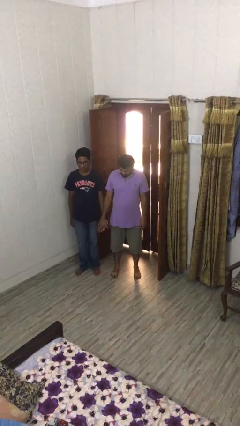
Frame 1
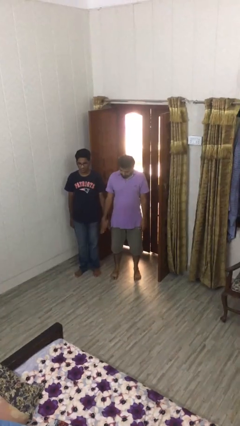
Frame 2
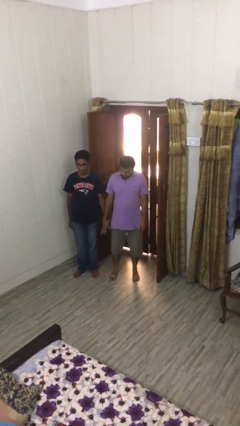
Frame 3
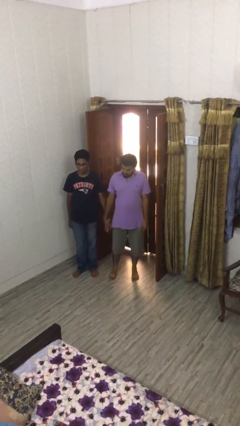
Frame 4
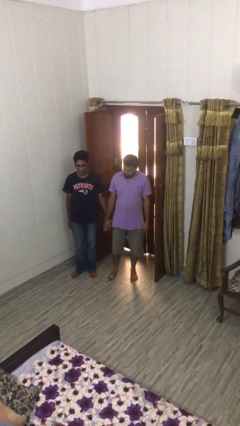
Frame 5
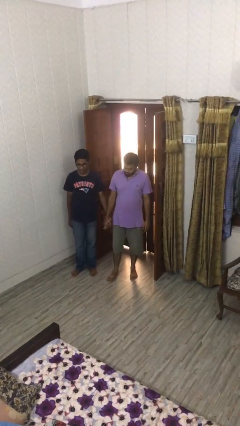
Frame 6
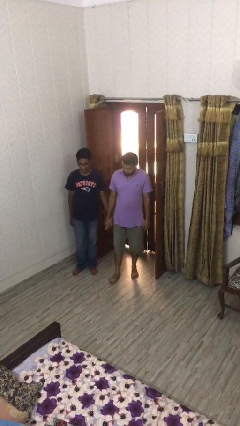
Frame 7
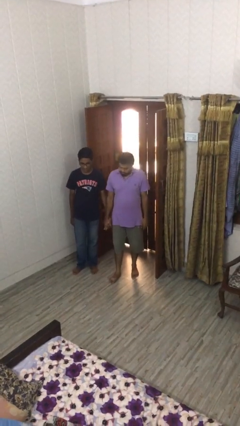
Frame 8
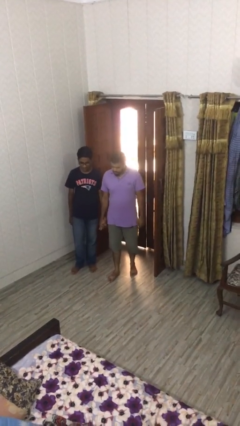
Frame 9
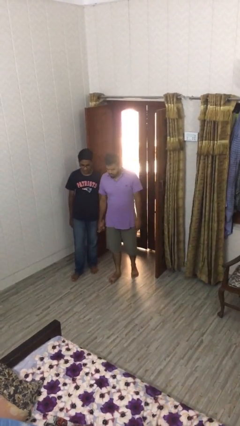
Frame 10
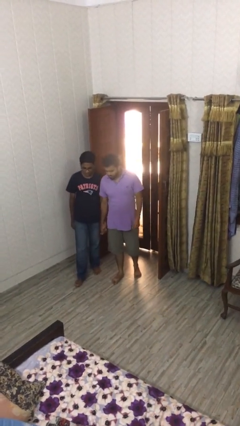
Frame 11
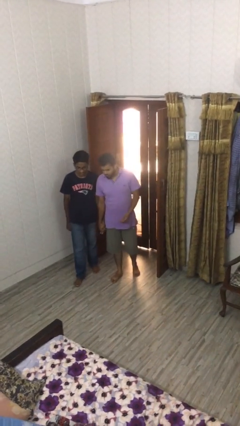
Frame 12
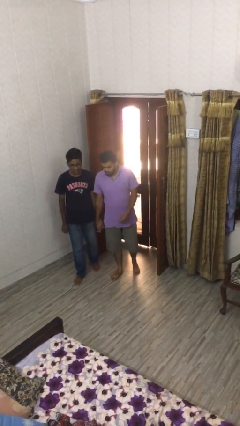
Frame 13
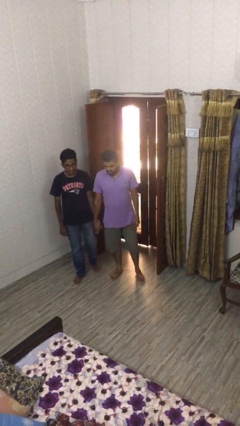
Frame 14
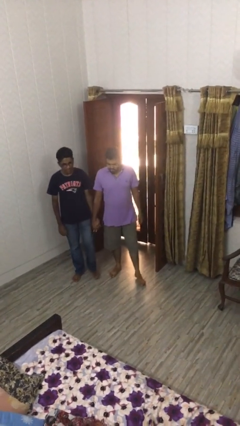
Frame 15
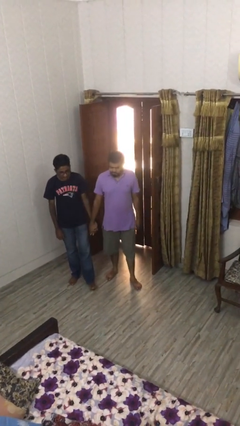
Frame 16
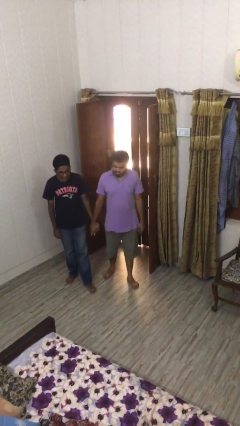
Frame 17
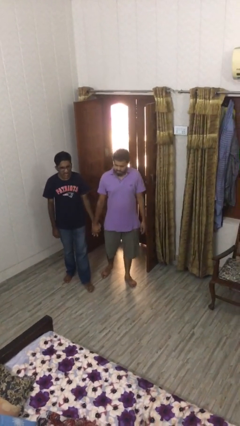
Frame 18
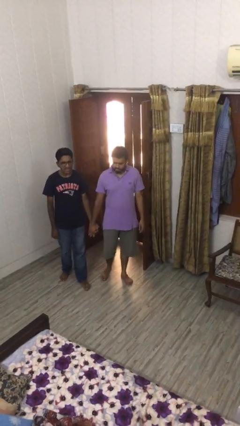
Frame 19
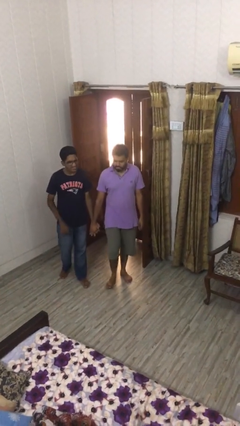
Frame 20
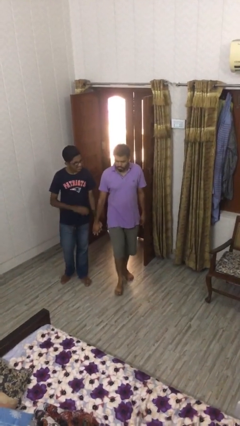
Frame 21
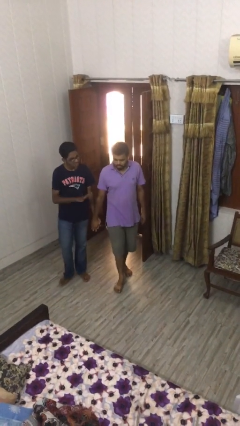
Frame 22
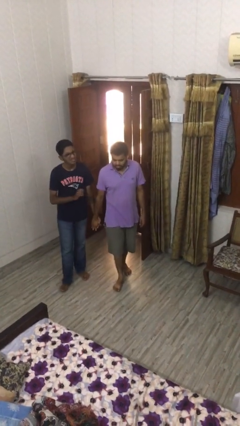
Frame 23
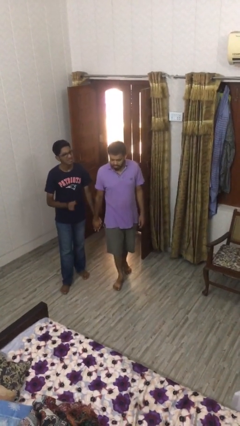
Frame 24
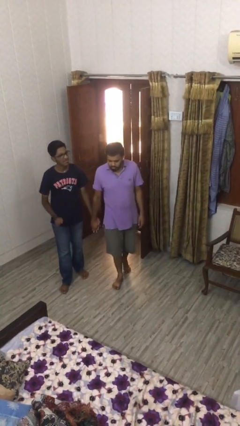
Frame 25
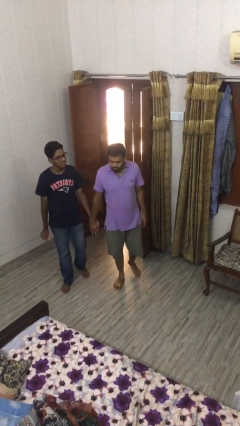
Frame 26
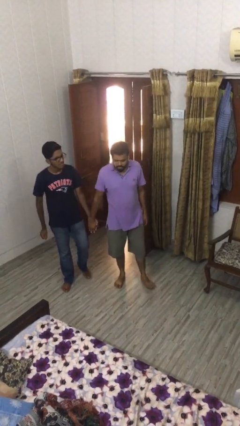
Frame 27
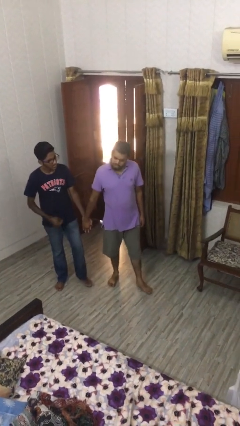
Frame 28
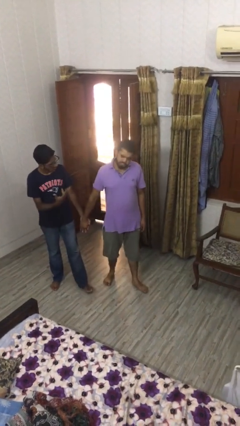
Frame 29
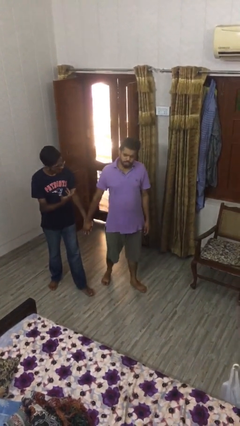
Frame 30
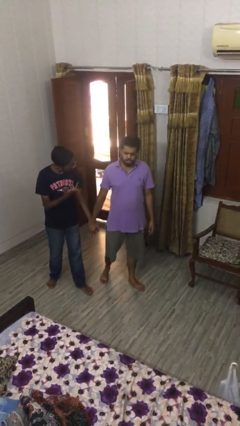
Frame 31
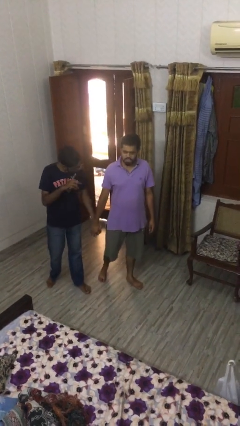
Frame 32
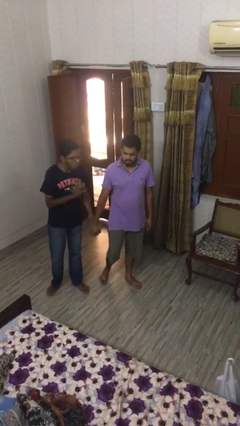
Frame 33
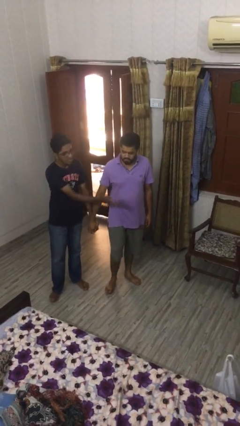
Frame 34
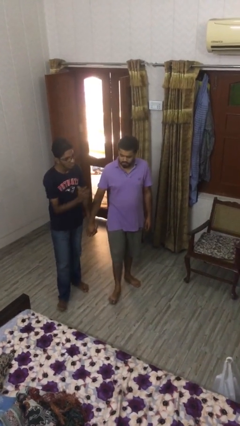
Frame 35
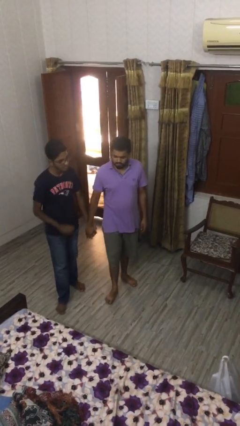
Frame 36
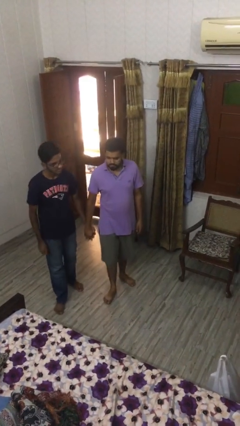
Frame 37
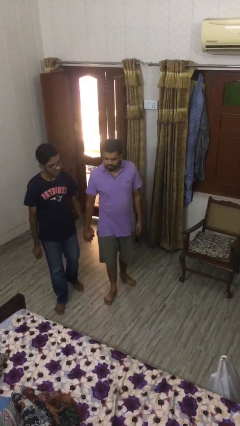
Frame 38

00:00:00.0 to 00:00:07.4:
person holds hand

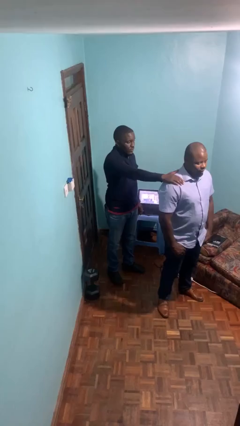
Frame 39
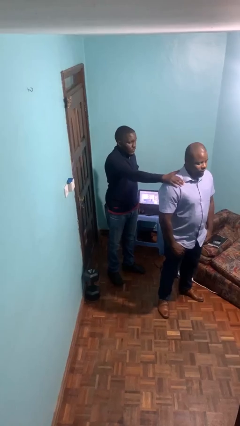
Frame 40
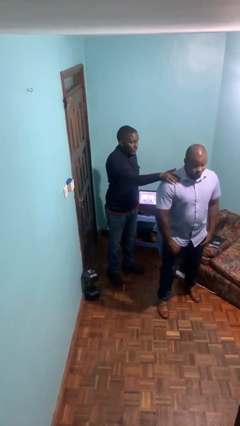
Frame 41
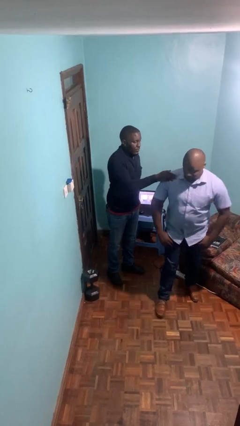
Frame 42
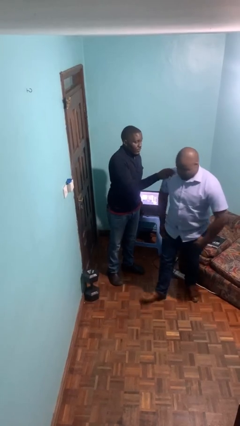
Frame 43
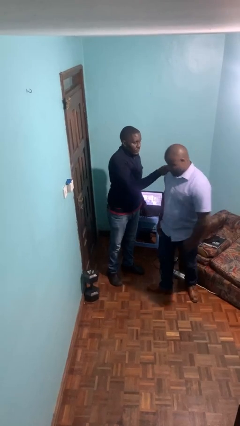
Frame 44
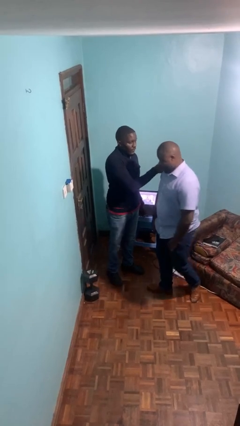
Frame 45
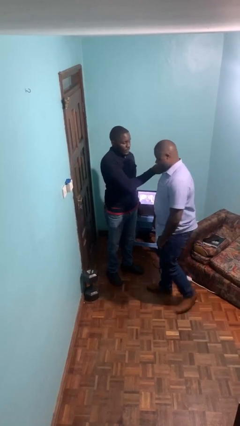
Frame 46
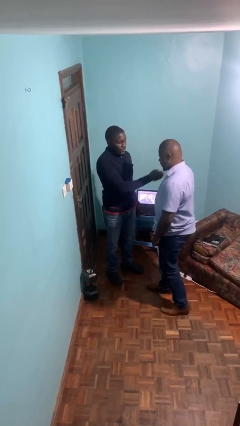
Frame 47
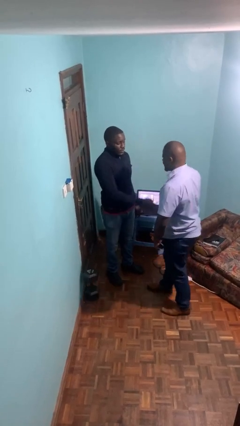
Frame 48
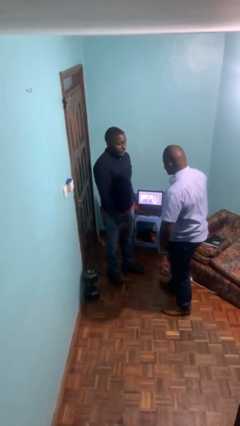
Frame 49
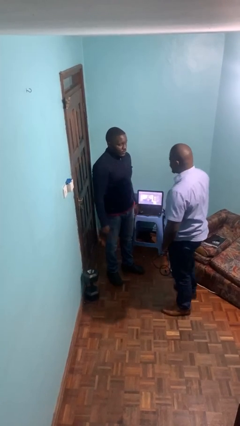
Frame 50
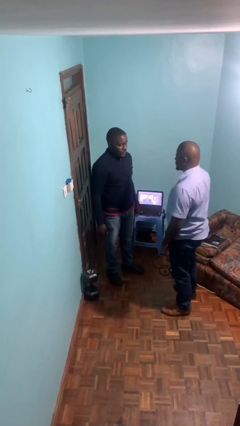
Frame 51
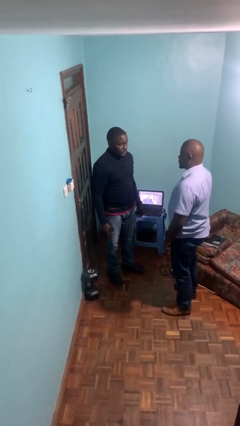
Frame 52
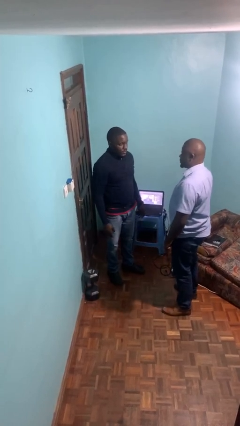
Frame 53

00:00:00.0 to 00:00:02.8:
person spins person around

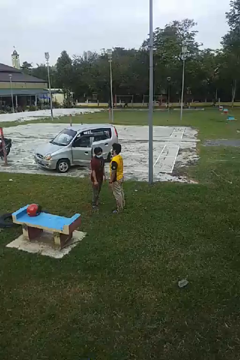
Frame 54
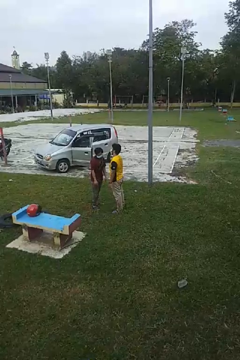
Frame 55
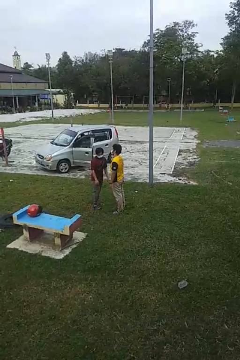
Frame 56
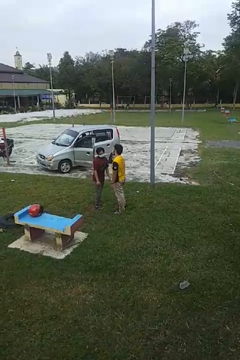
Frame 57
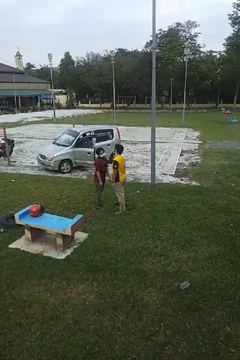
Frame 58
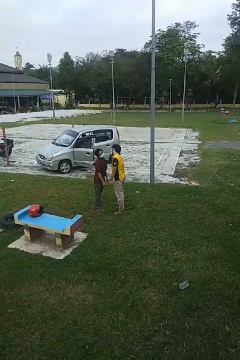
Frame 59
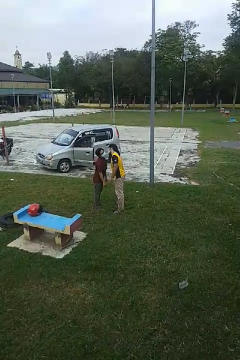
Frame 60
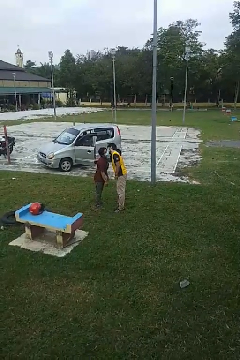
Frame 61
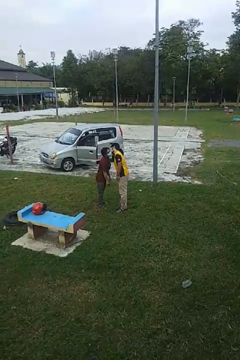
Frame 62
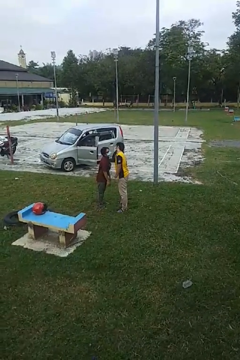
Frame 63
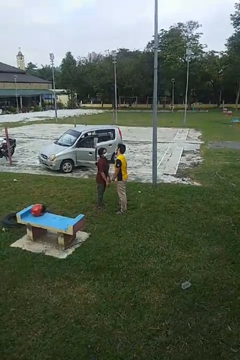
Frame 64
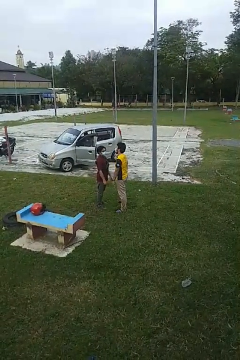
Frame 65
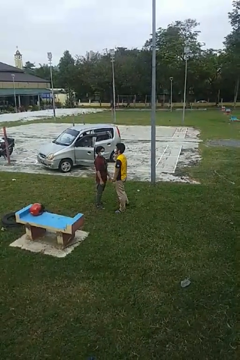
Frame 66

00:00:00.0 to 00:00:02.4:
person kisses cheek of person

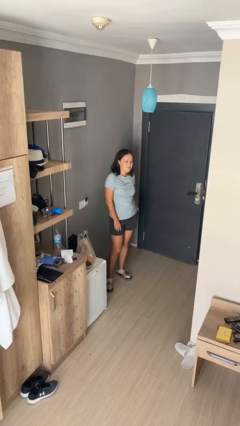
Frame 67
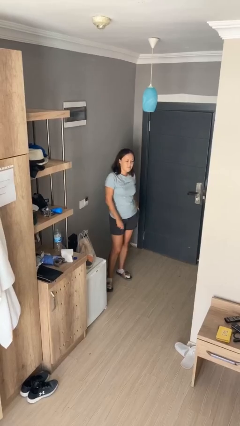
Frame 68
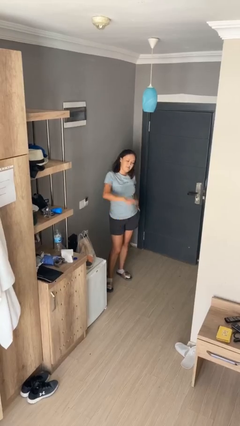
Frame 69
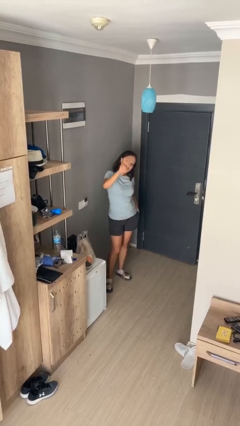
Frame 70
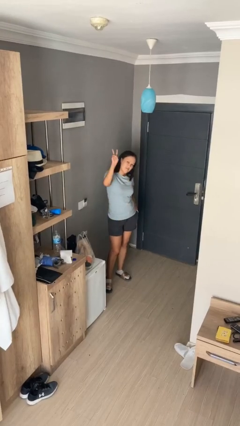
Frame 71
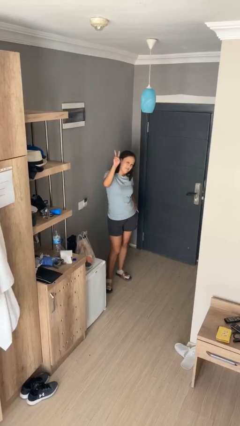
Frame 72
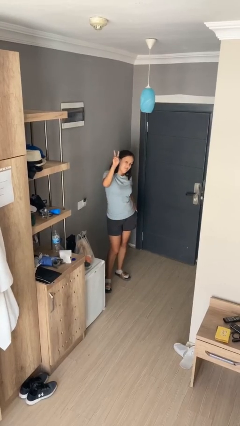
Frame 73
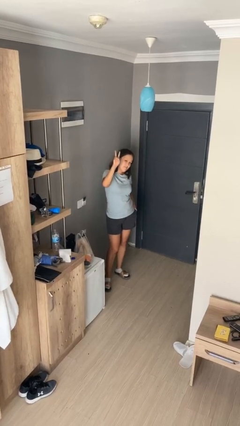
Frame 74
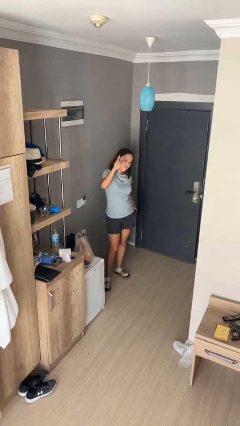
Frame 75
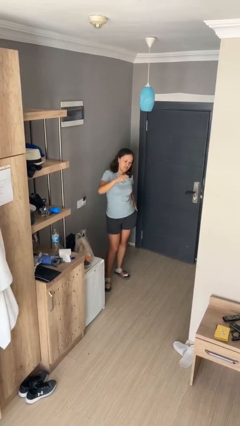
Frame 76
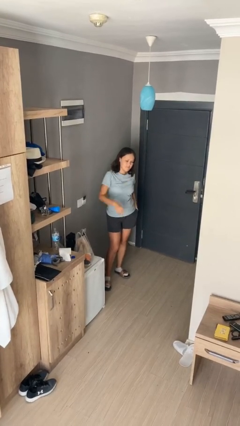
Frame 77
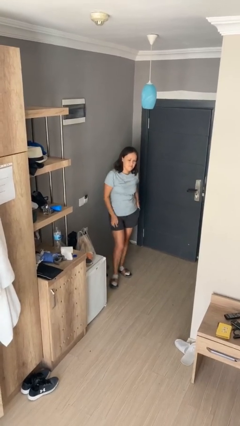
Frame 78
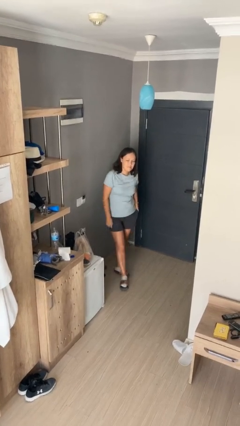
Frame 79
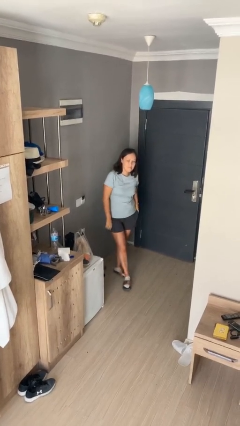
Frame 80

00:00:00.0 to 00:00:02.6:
person gestures peace

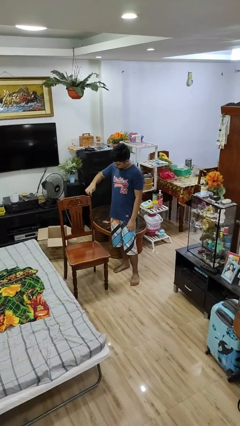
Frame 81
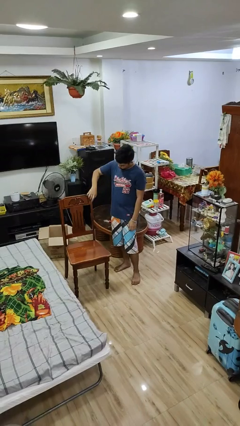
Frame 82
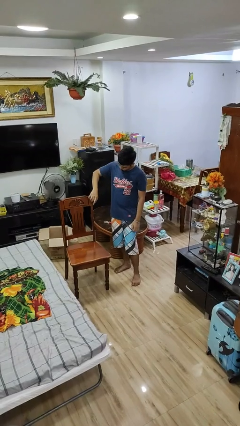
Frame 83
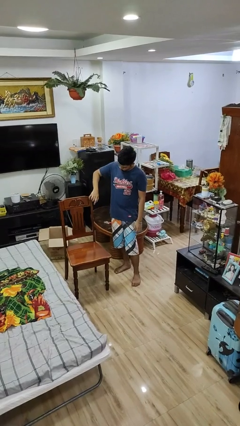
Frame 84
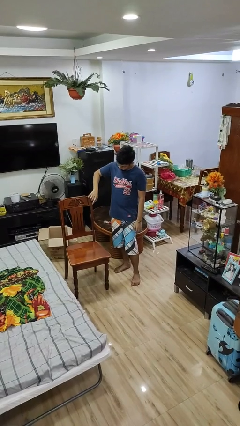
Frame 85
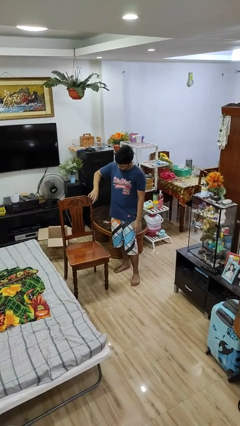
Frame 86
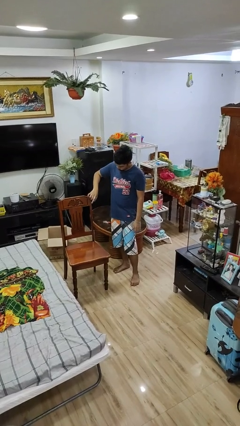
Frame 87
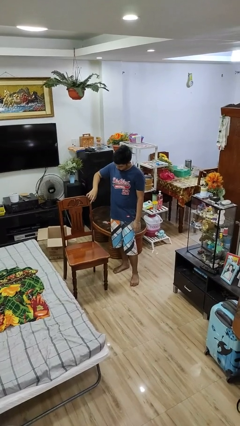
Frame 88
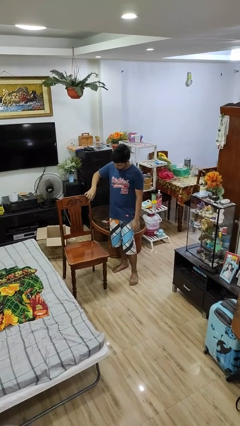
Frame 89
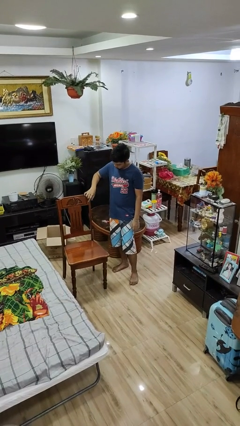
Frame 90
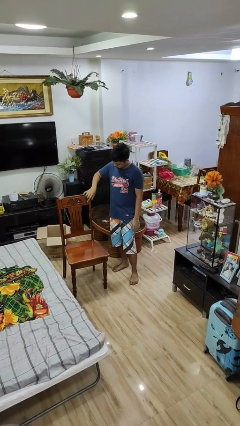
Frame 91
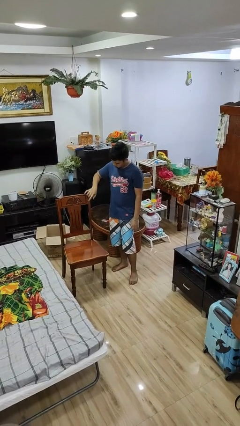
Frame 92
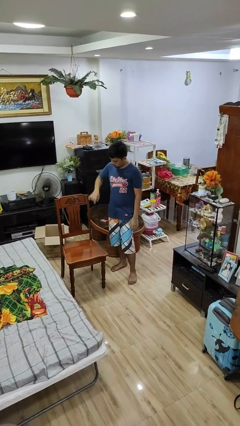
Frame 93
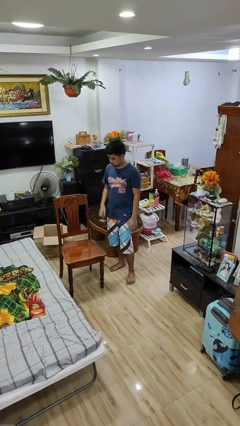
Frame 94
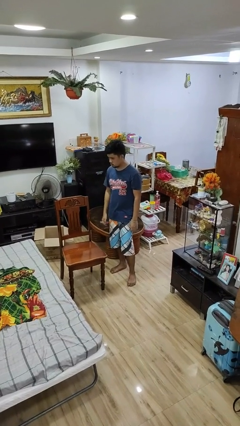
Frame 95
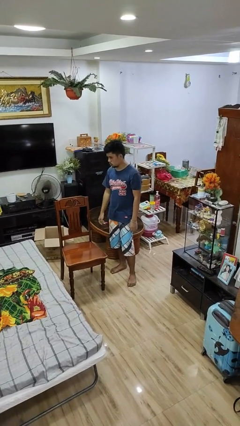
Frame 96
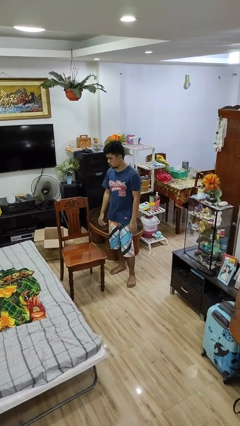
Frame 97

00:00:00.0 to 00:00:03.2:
person taps object with finger
